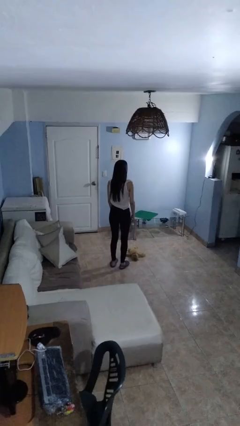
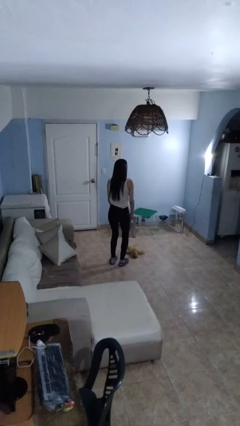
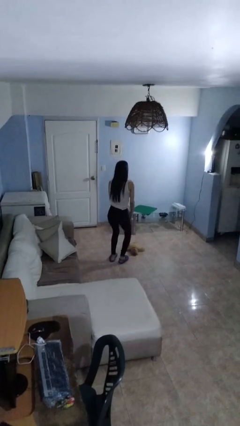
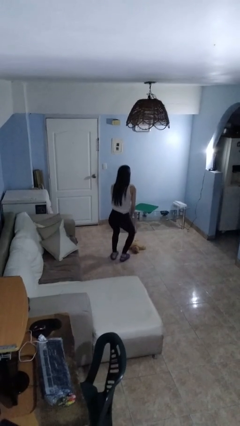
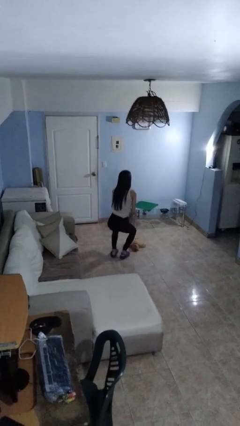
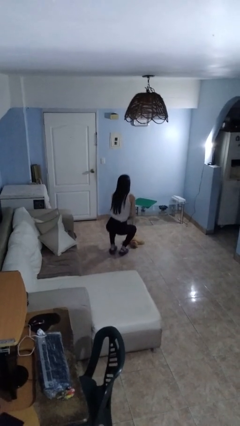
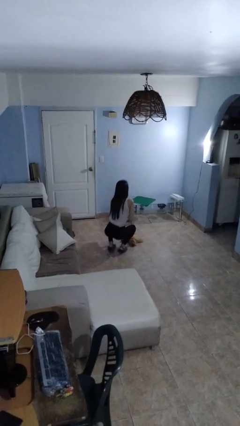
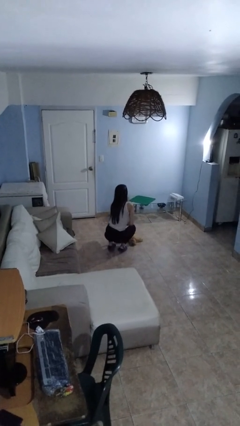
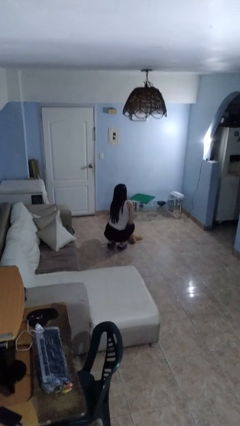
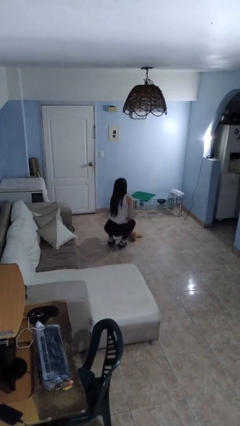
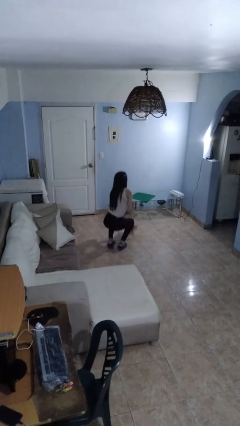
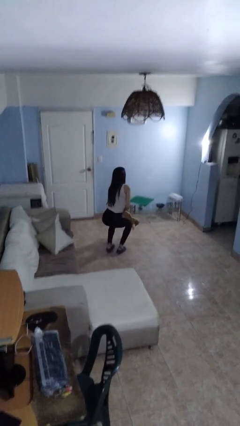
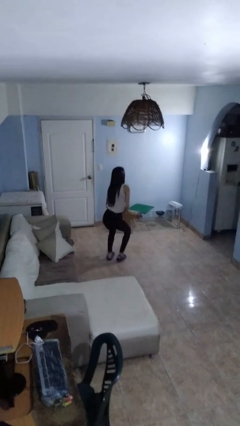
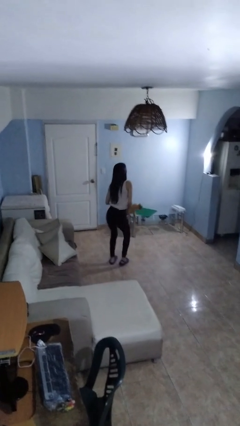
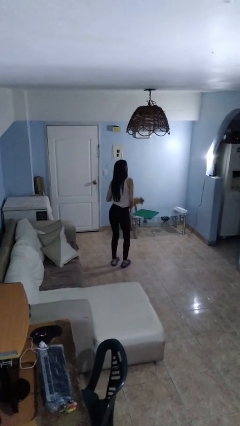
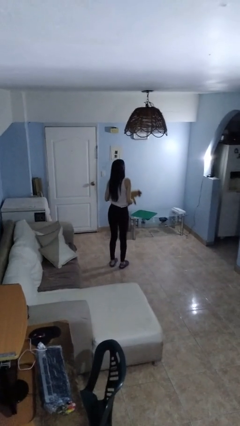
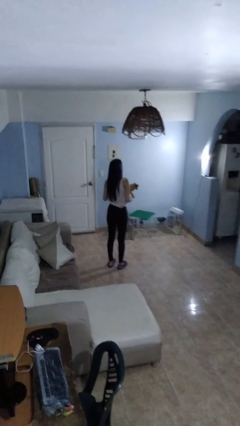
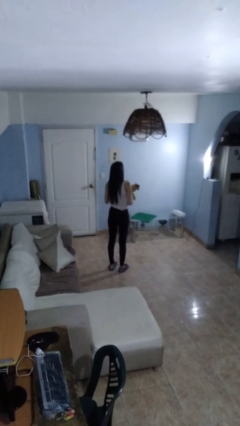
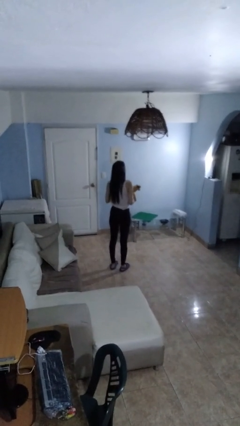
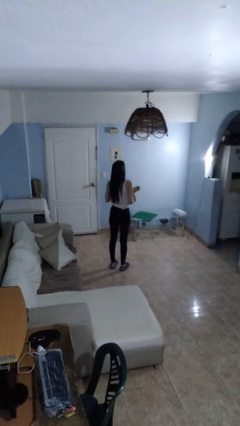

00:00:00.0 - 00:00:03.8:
person picks up object from floor

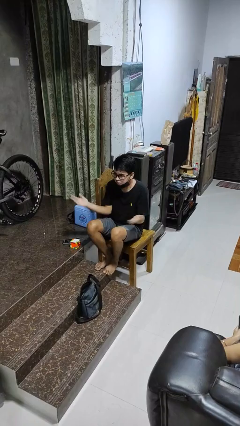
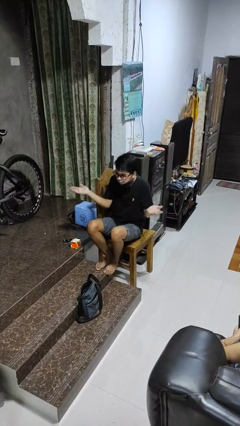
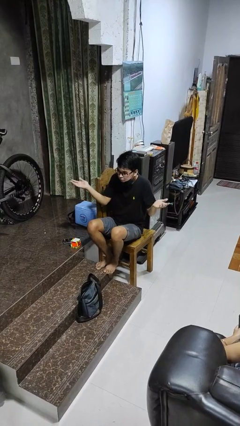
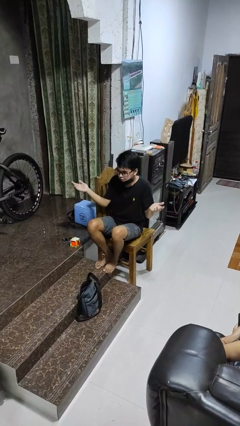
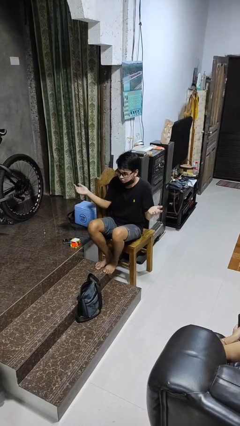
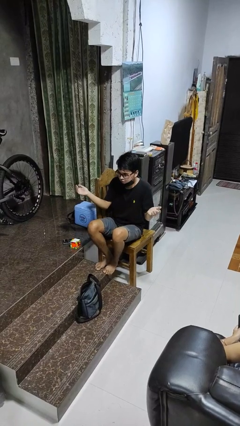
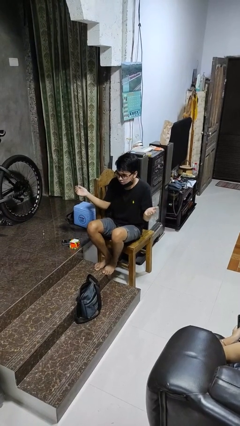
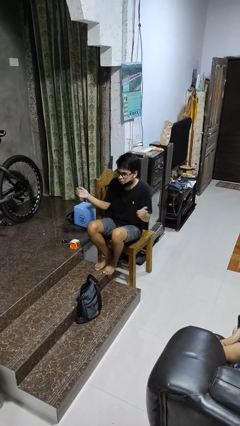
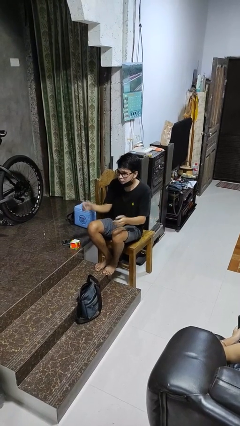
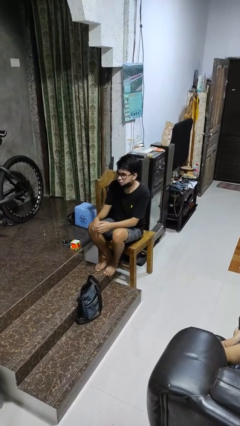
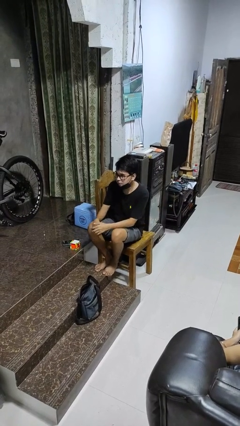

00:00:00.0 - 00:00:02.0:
person shrugs

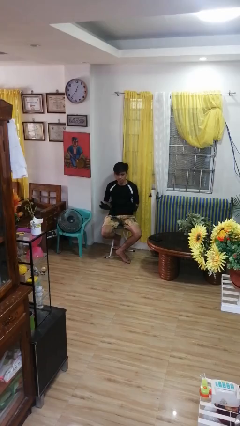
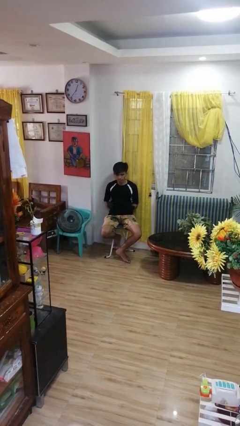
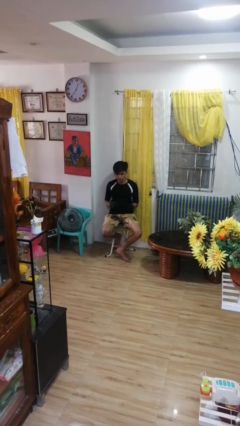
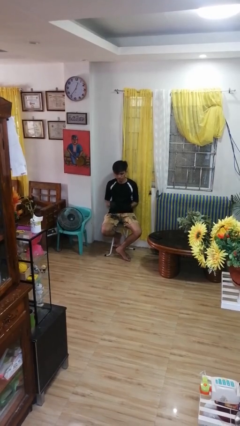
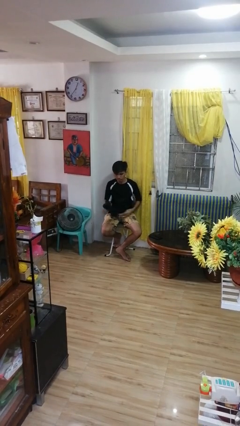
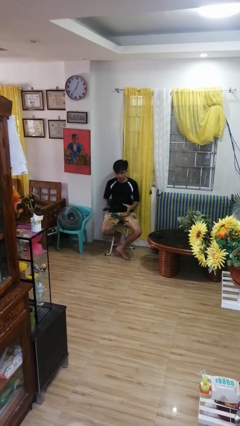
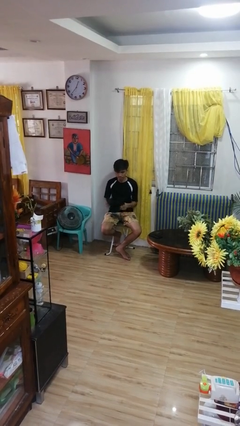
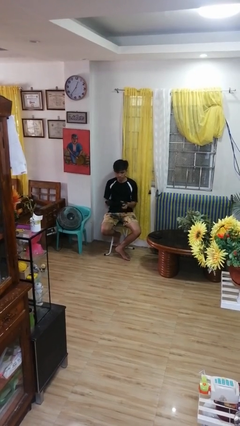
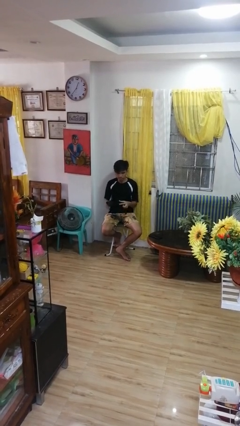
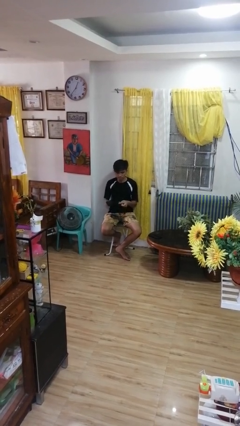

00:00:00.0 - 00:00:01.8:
person takes off gloves

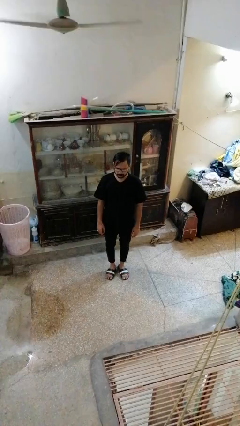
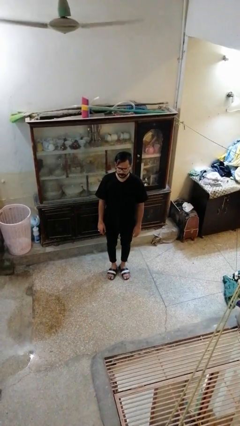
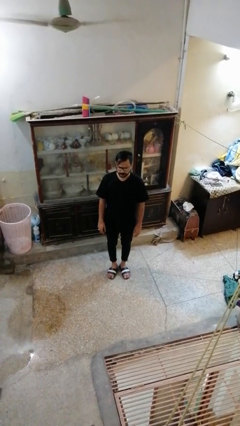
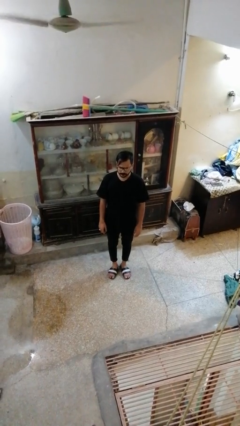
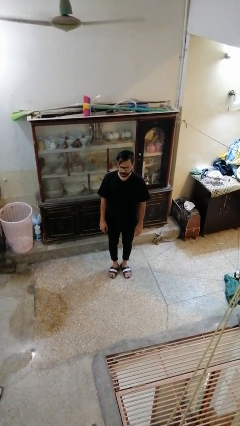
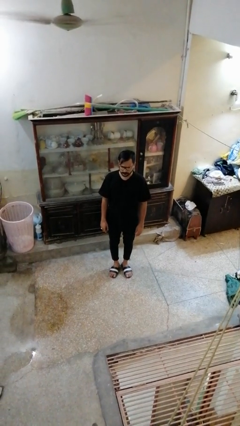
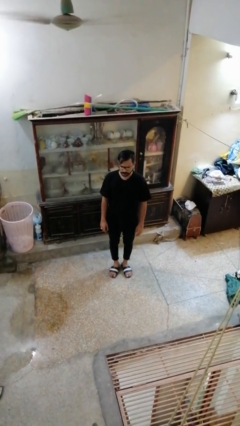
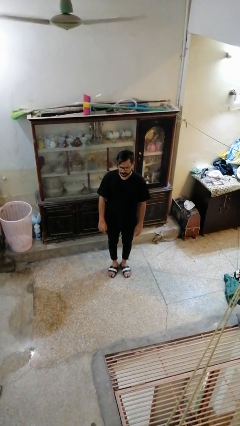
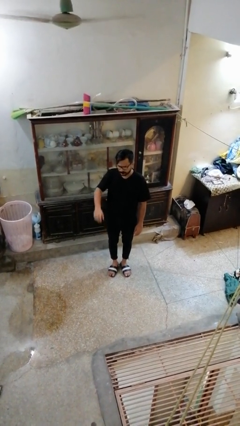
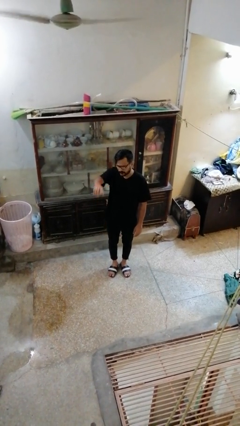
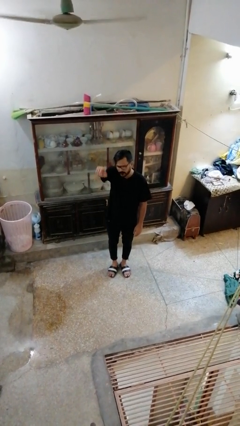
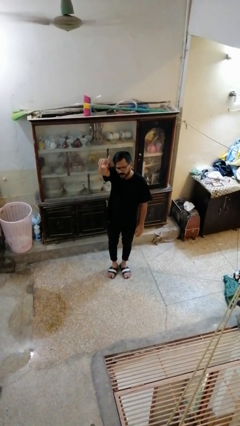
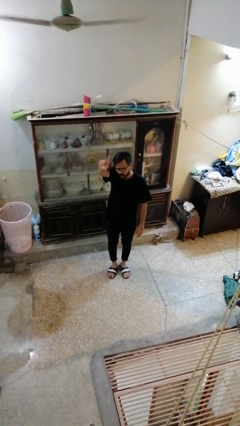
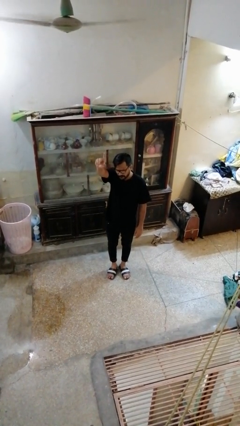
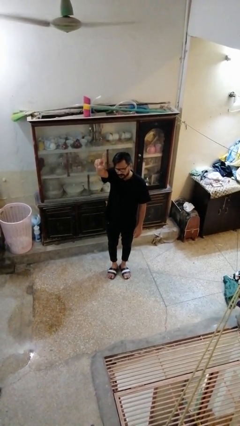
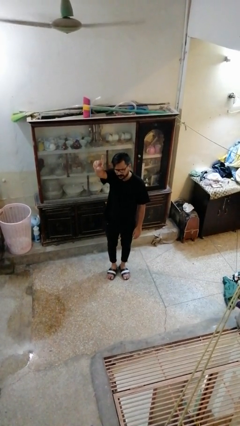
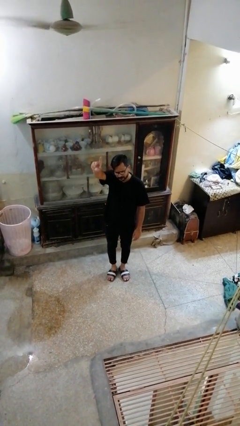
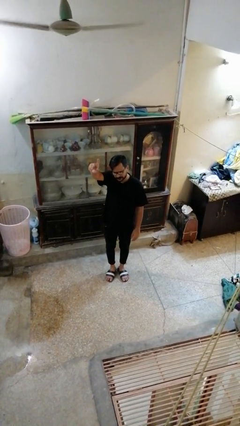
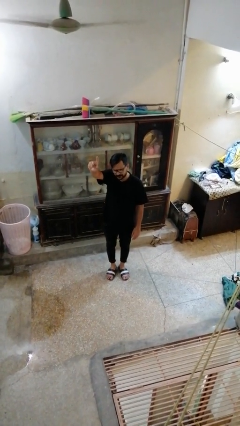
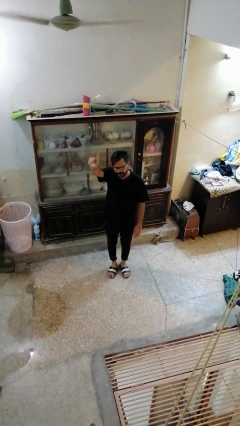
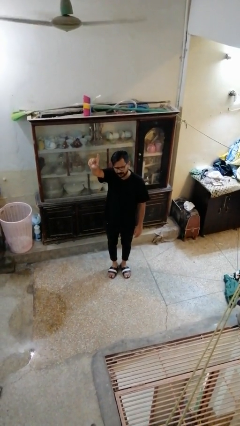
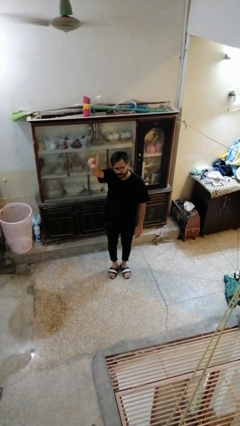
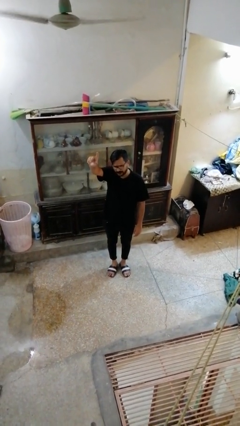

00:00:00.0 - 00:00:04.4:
person gestures raise hand

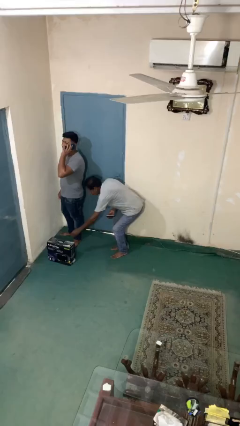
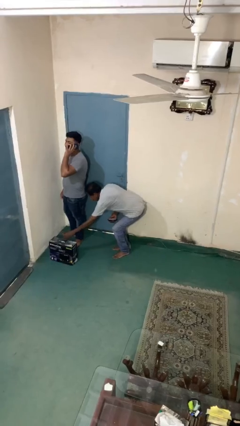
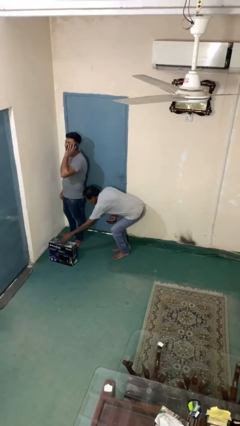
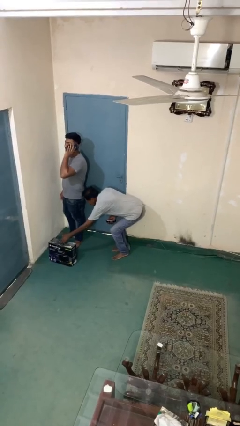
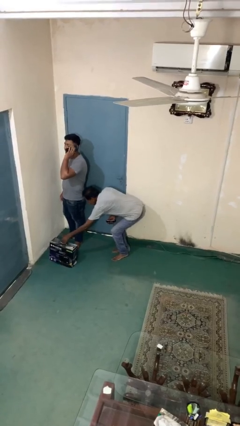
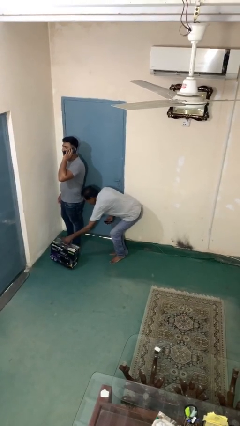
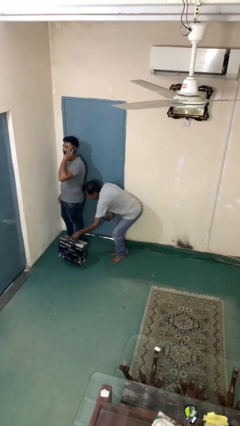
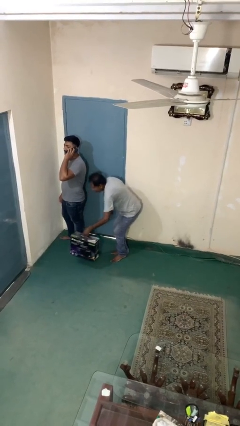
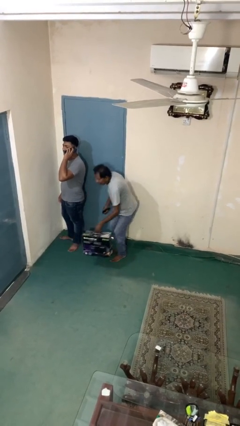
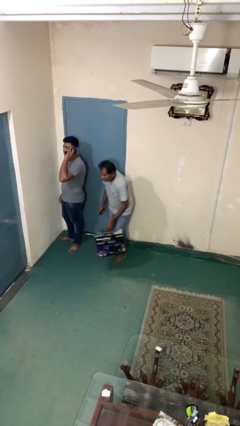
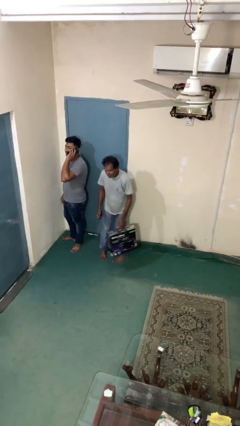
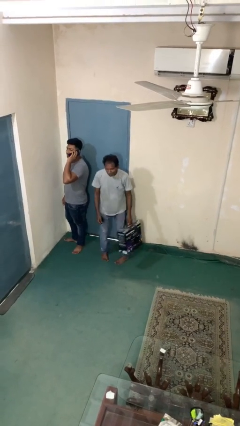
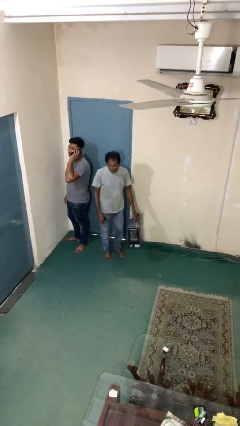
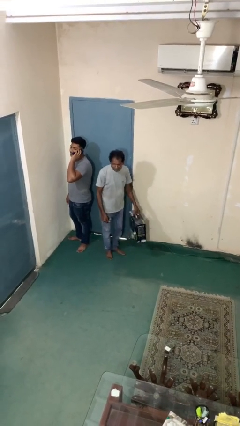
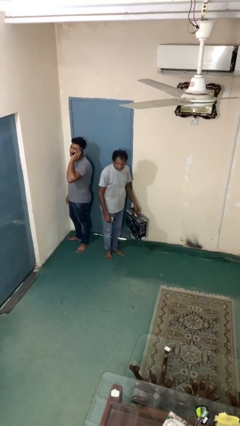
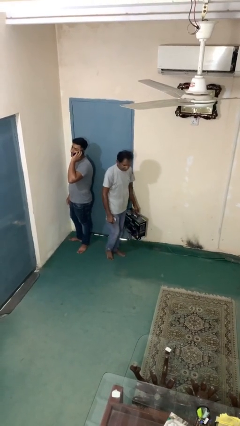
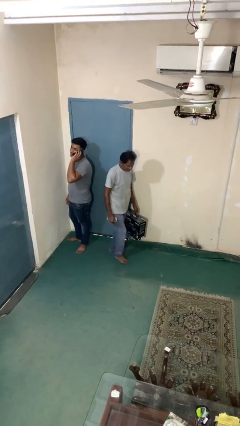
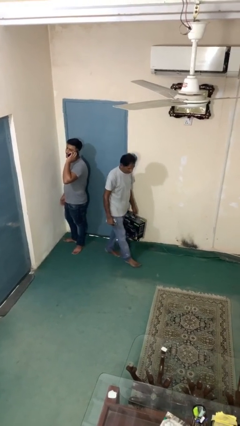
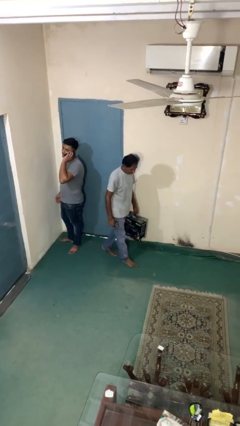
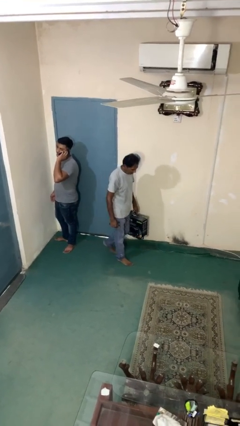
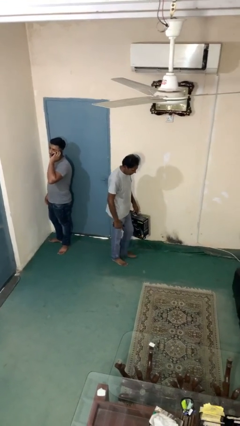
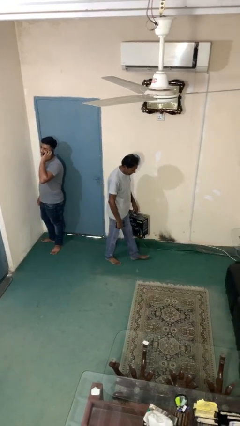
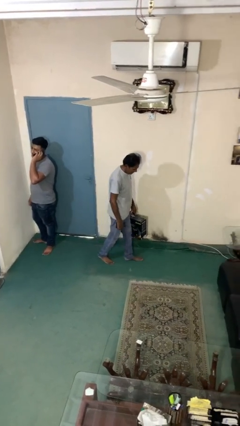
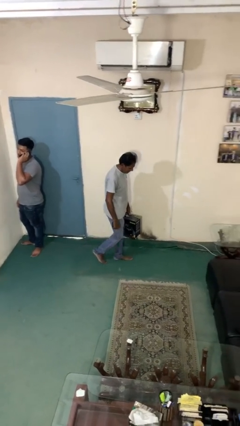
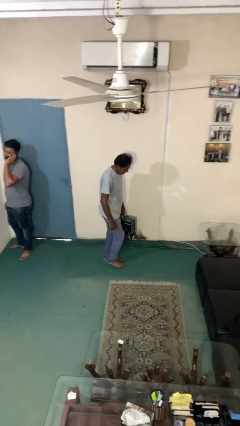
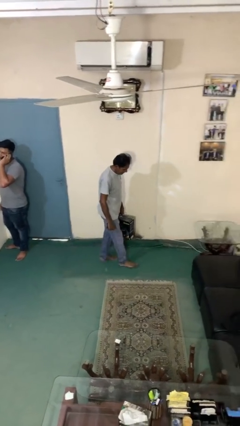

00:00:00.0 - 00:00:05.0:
person steals object from person

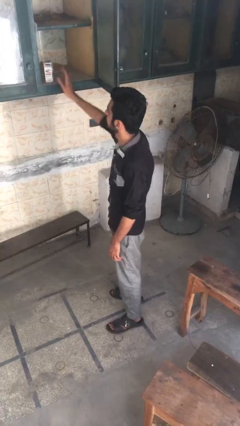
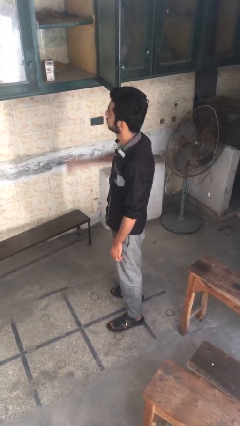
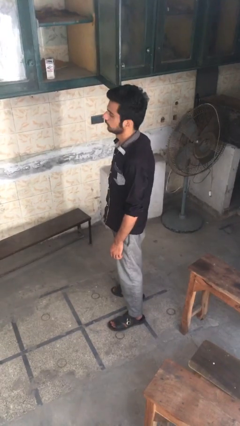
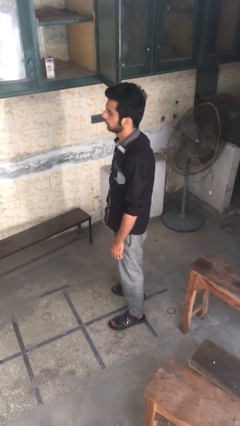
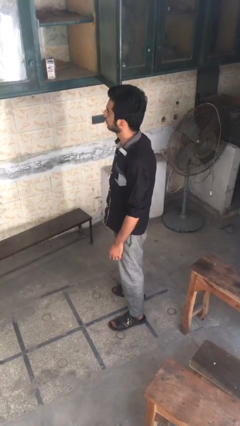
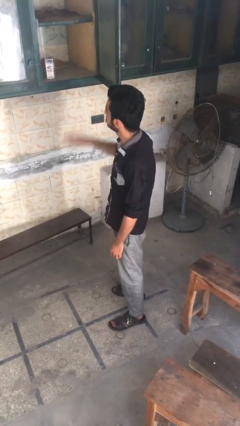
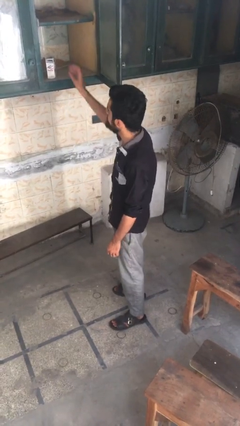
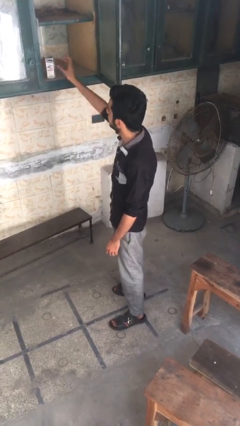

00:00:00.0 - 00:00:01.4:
person takes object from cabinet
